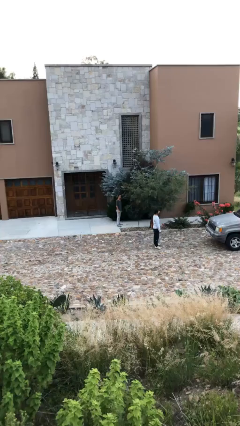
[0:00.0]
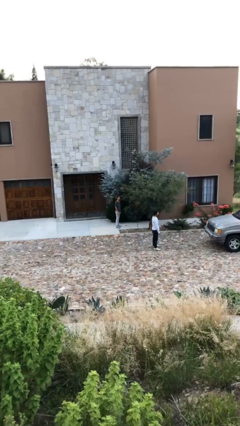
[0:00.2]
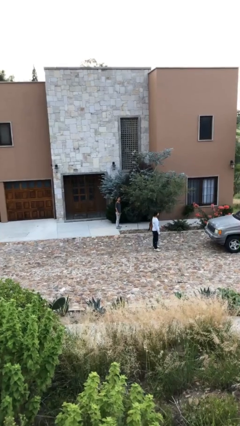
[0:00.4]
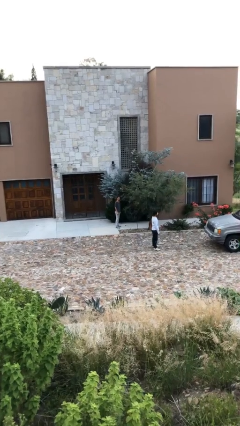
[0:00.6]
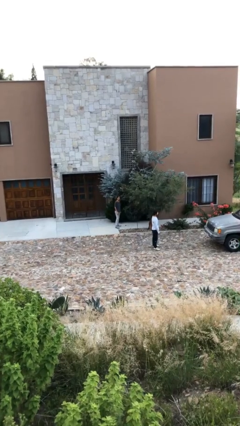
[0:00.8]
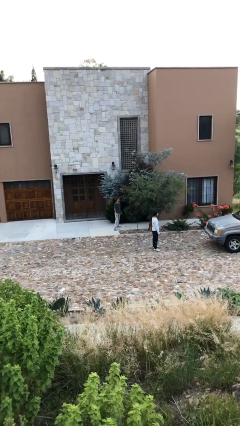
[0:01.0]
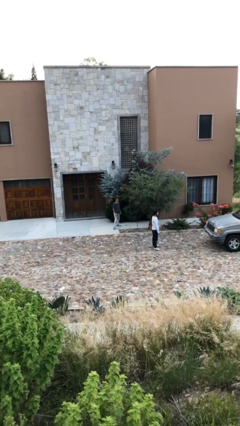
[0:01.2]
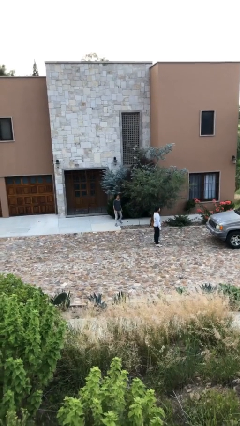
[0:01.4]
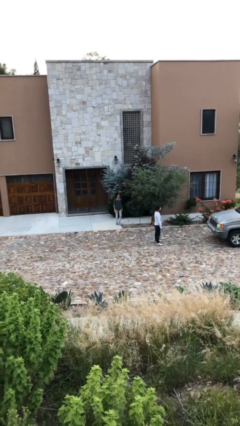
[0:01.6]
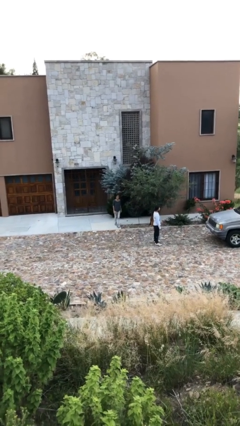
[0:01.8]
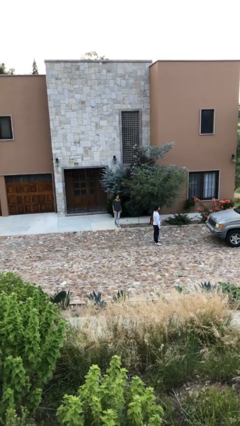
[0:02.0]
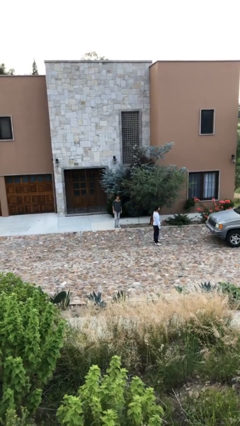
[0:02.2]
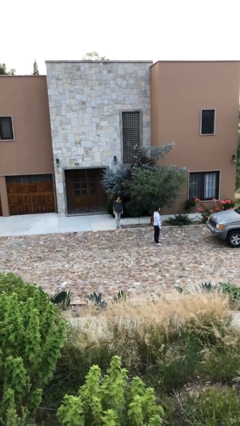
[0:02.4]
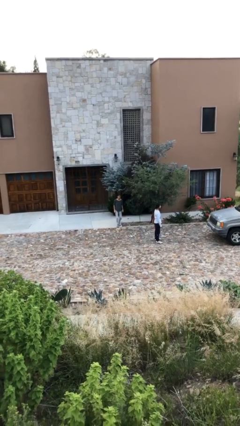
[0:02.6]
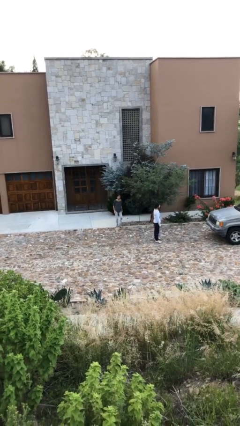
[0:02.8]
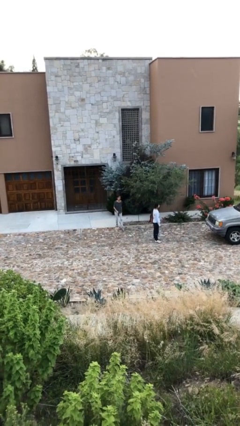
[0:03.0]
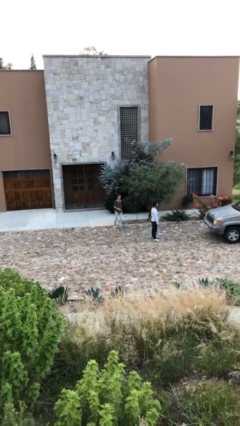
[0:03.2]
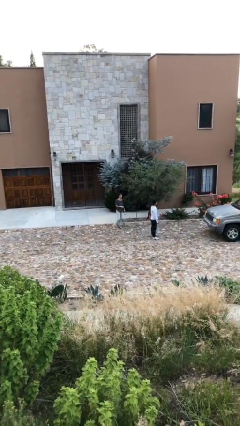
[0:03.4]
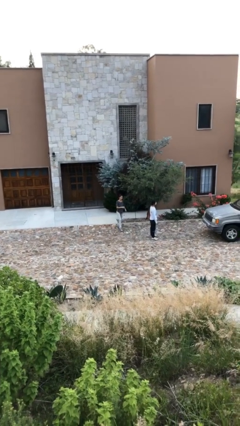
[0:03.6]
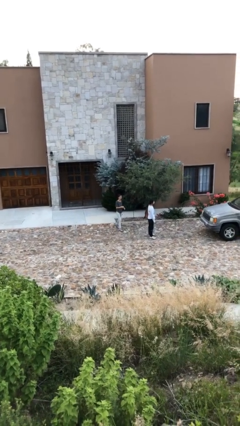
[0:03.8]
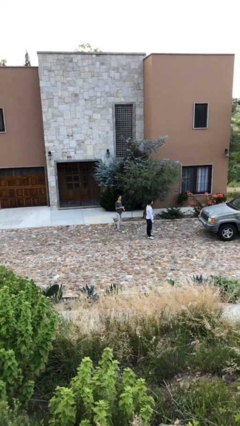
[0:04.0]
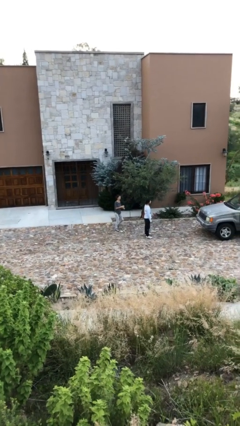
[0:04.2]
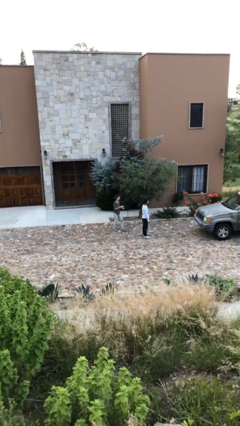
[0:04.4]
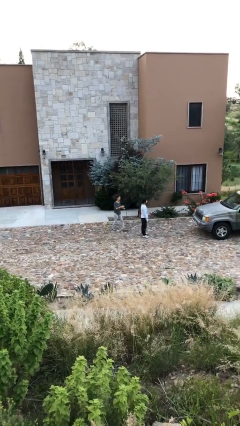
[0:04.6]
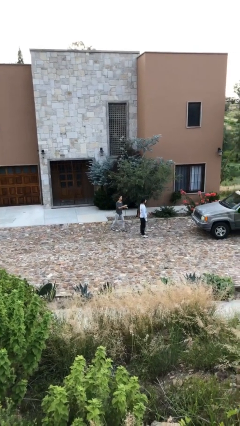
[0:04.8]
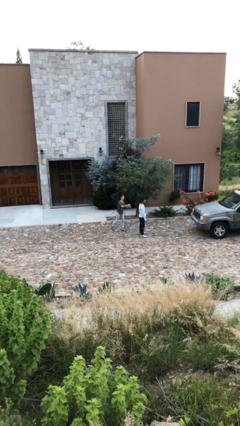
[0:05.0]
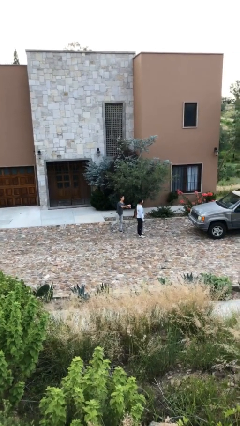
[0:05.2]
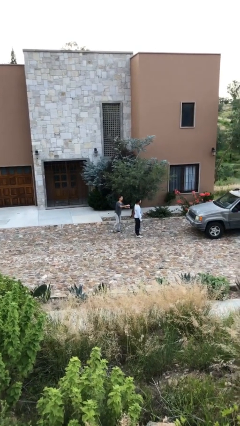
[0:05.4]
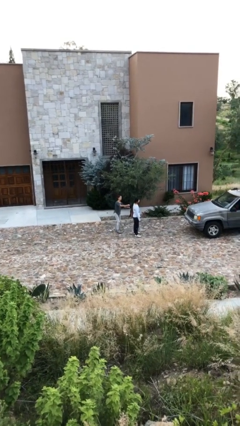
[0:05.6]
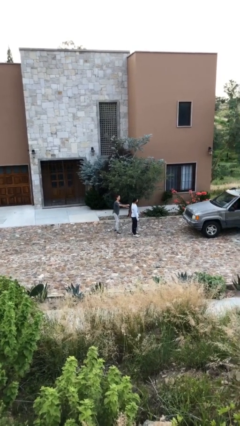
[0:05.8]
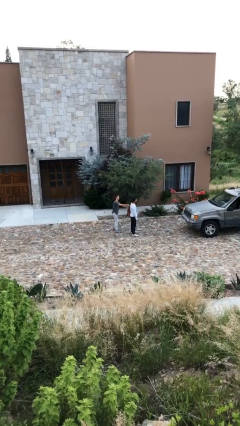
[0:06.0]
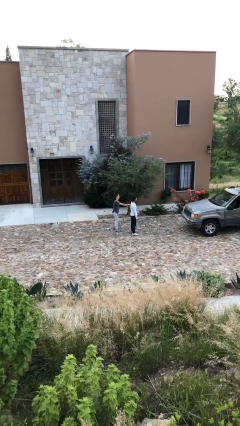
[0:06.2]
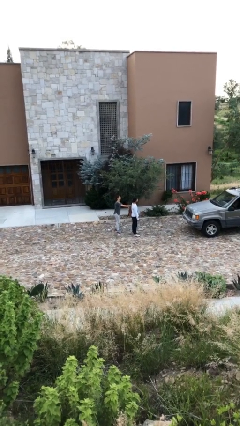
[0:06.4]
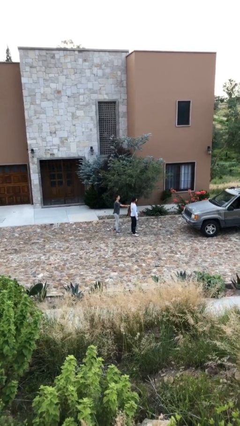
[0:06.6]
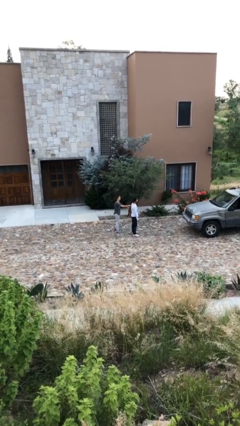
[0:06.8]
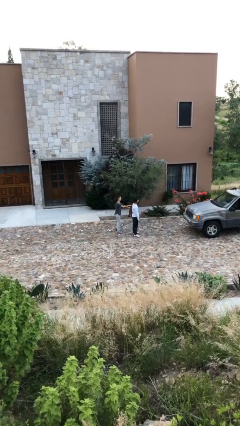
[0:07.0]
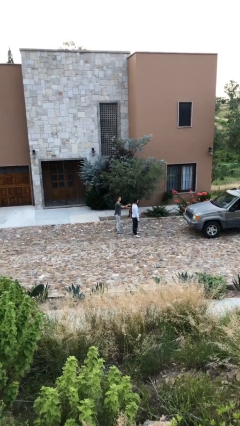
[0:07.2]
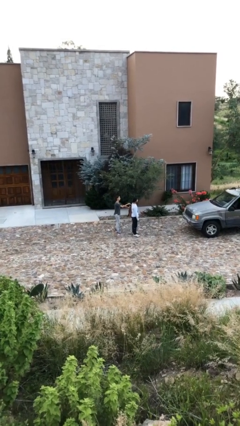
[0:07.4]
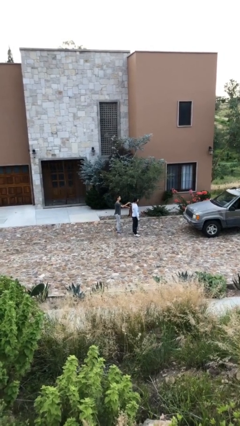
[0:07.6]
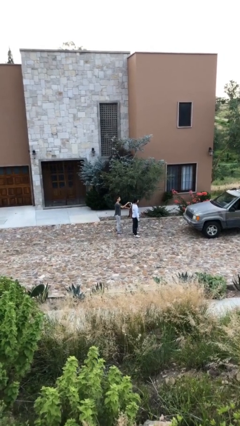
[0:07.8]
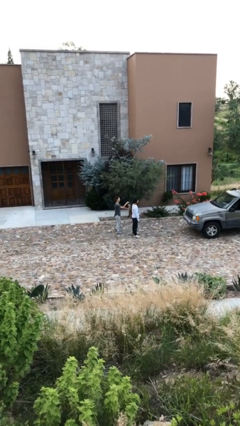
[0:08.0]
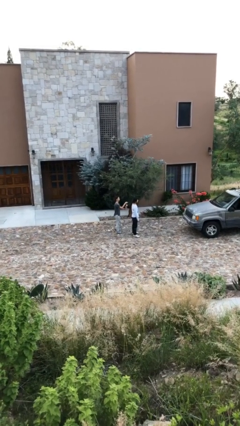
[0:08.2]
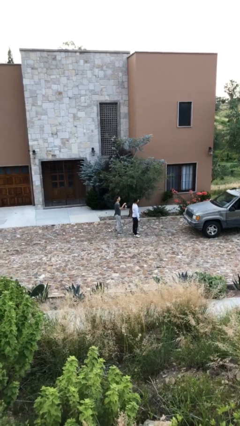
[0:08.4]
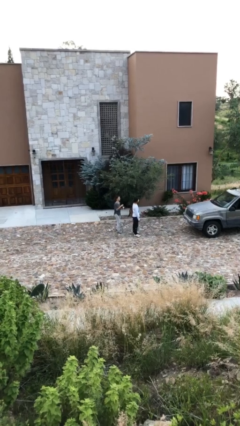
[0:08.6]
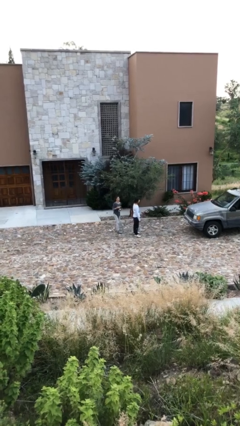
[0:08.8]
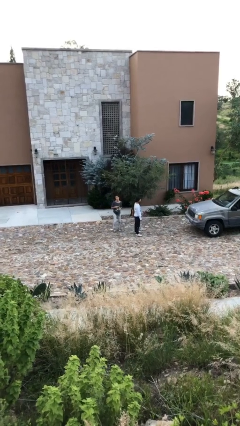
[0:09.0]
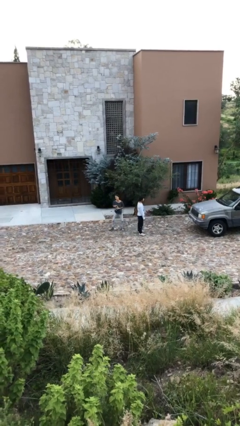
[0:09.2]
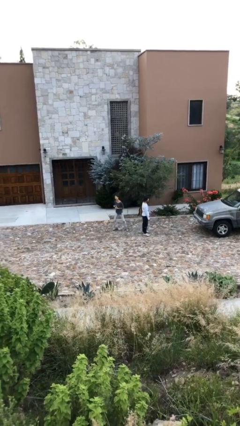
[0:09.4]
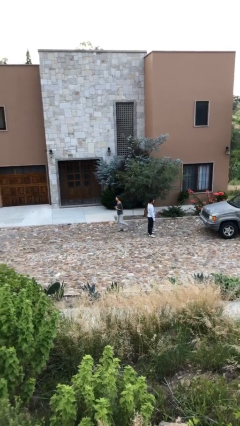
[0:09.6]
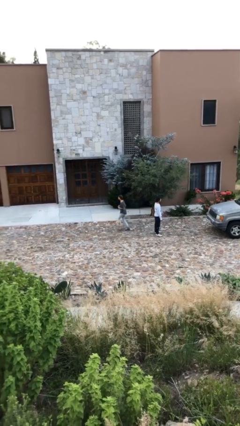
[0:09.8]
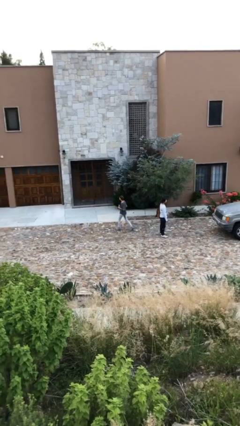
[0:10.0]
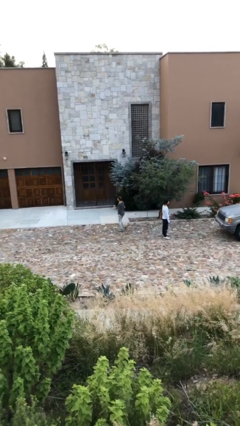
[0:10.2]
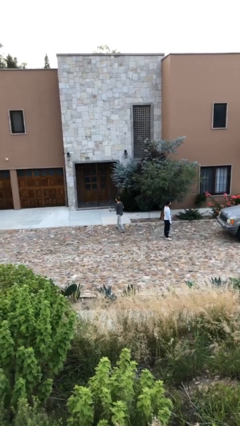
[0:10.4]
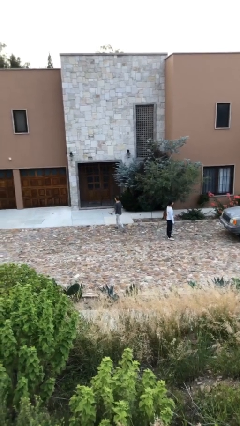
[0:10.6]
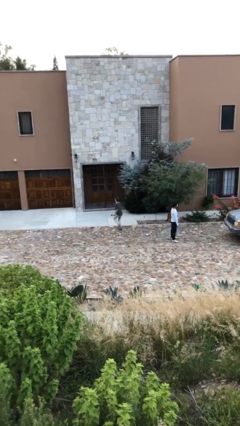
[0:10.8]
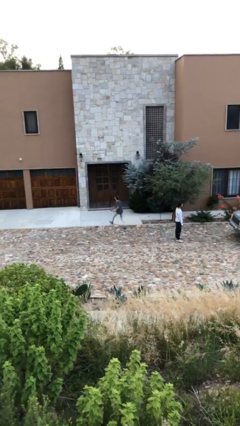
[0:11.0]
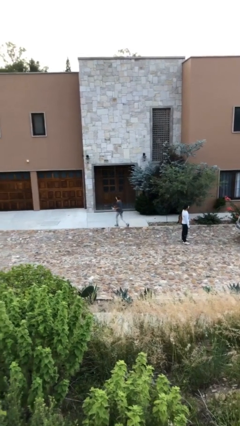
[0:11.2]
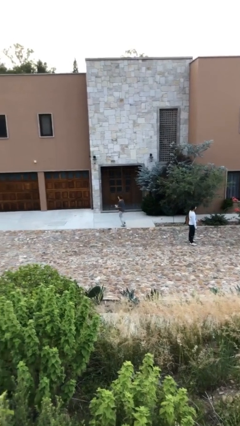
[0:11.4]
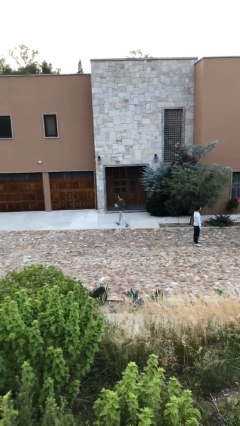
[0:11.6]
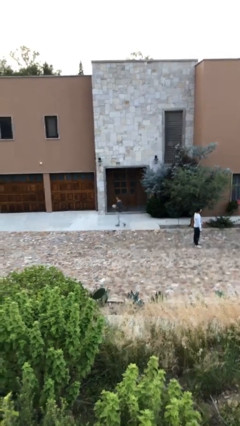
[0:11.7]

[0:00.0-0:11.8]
person steals object from person

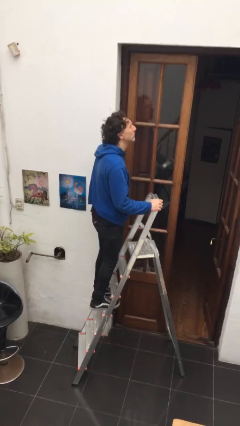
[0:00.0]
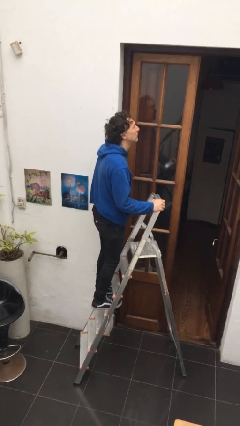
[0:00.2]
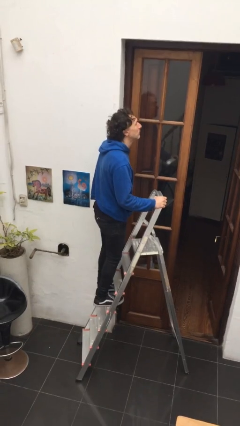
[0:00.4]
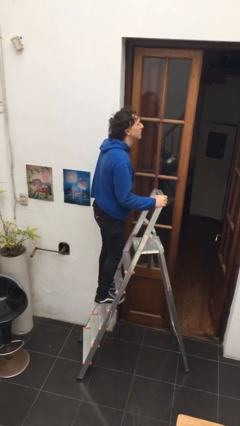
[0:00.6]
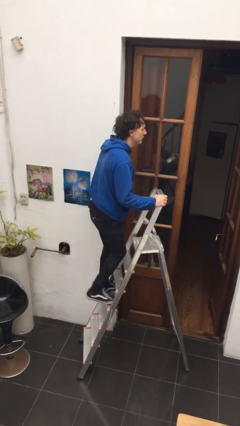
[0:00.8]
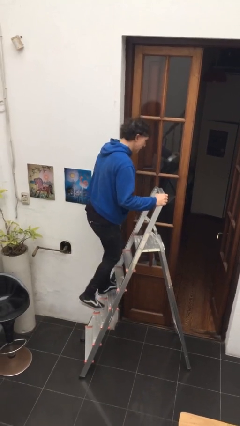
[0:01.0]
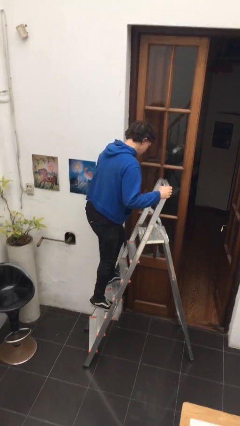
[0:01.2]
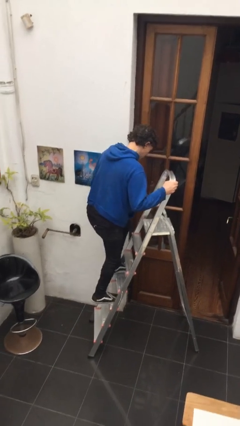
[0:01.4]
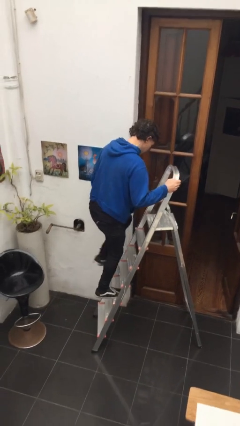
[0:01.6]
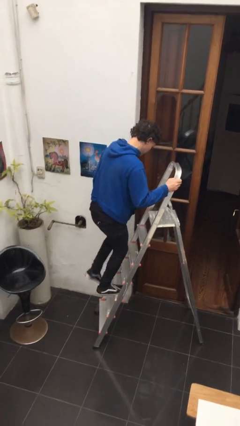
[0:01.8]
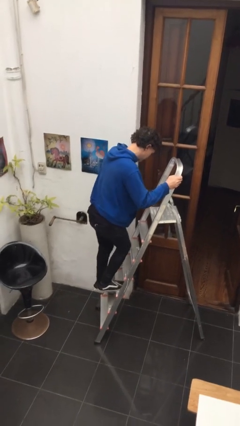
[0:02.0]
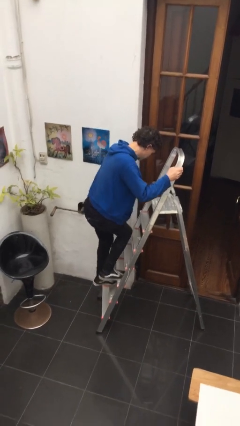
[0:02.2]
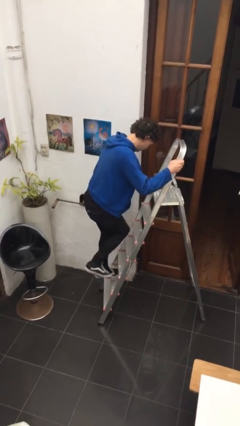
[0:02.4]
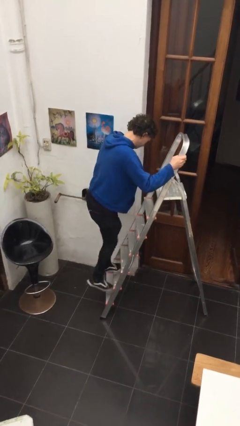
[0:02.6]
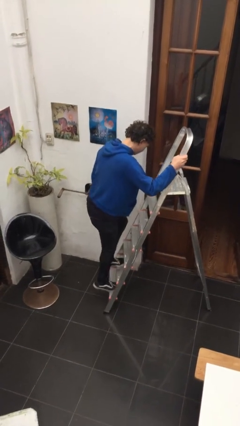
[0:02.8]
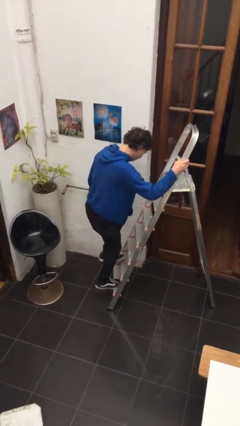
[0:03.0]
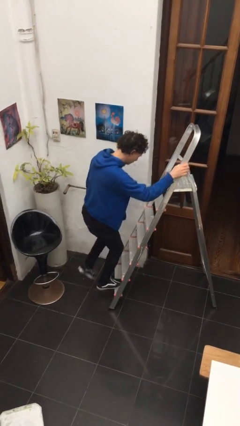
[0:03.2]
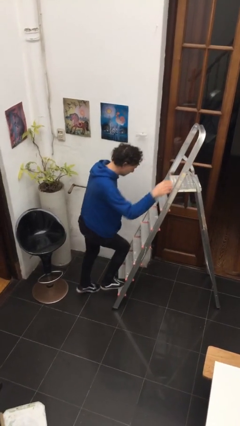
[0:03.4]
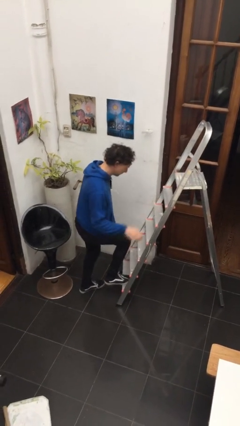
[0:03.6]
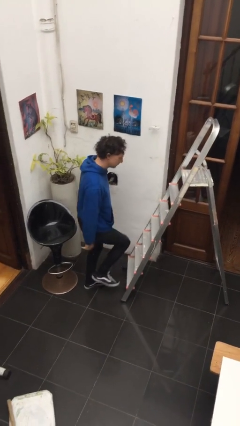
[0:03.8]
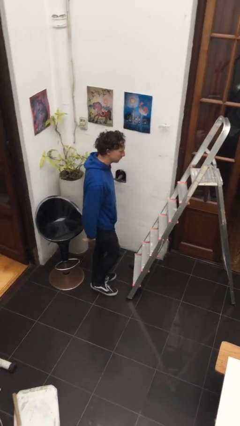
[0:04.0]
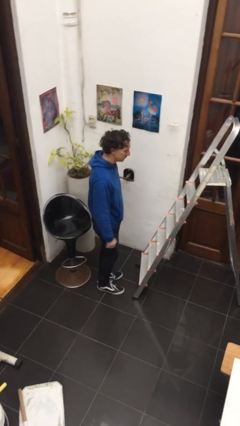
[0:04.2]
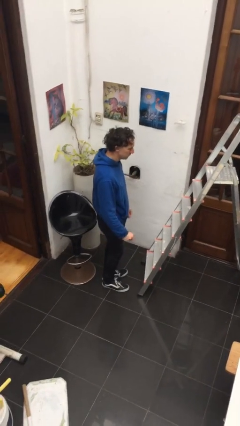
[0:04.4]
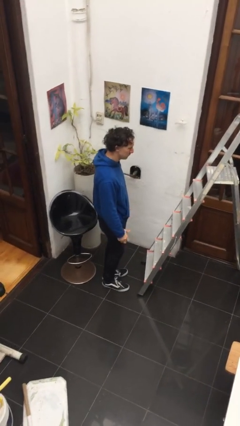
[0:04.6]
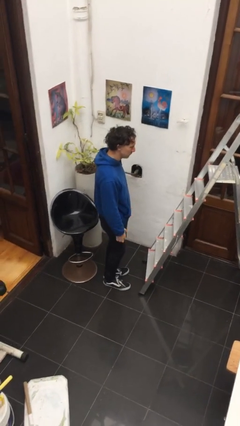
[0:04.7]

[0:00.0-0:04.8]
person climbs down ladder

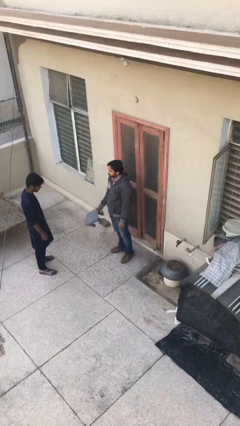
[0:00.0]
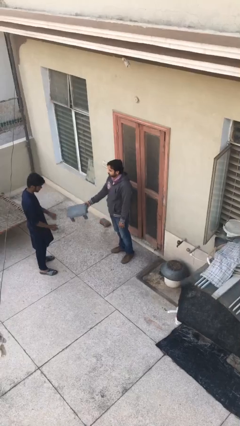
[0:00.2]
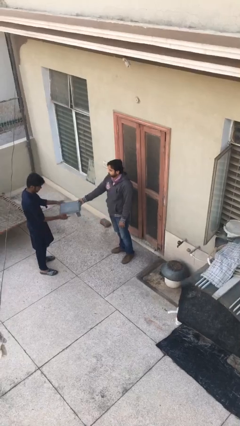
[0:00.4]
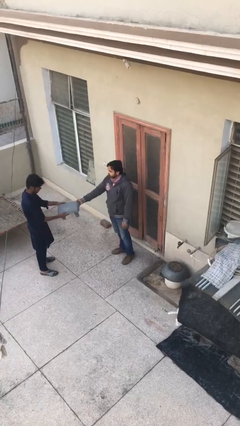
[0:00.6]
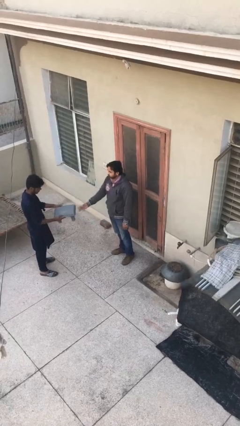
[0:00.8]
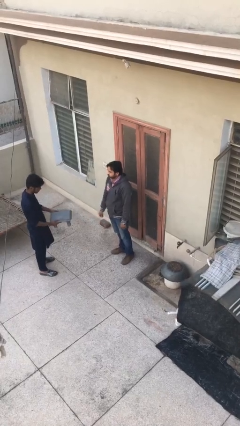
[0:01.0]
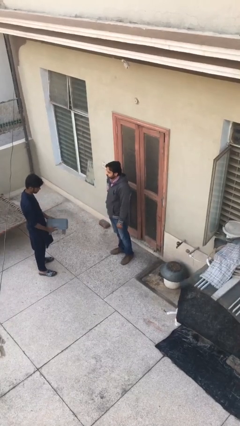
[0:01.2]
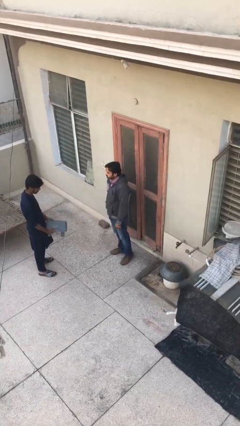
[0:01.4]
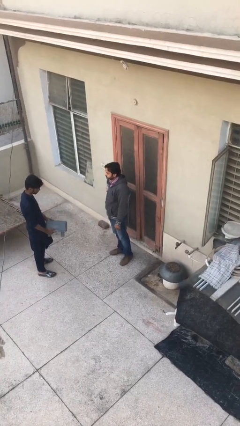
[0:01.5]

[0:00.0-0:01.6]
person transfers object to person
